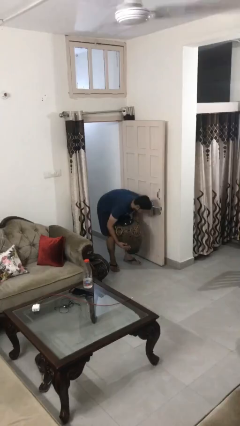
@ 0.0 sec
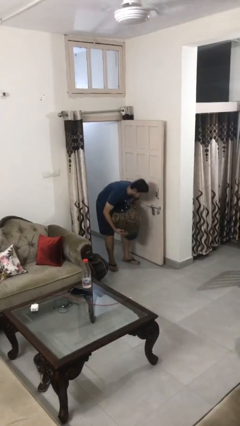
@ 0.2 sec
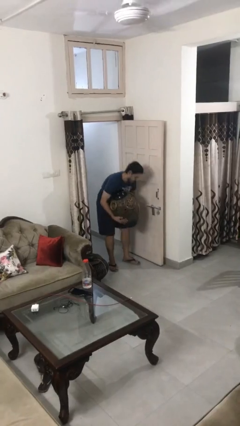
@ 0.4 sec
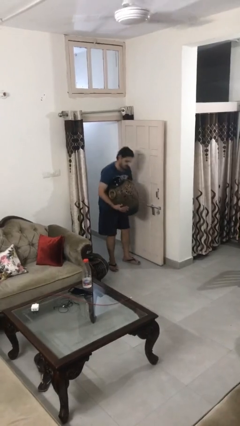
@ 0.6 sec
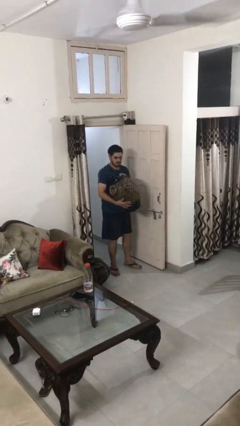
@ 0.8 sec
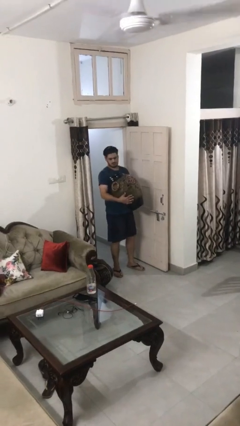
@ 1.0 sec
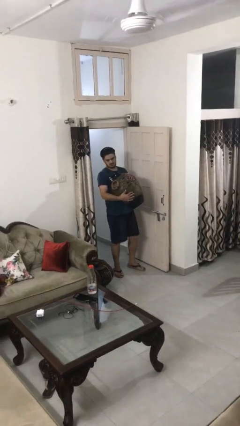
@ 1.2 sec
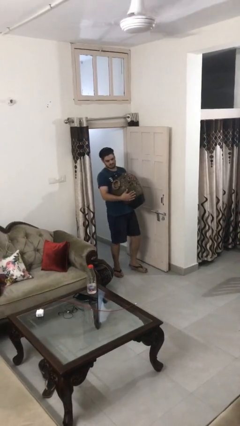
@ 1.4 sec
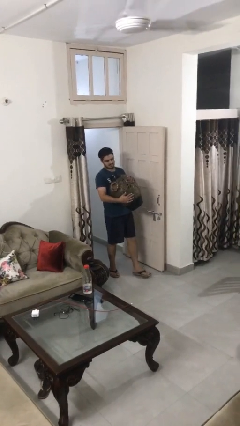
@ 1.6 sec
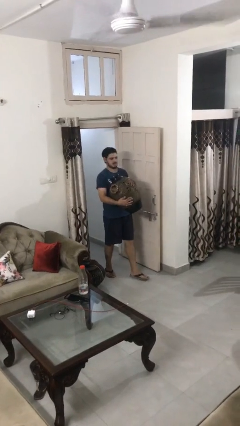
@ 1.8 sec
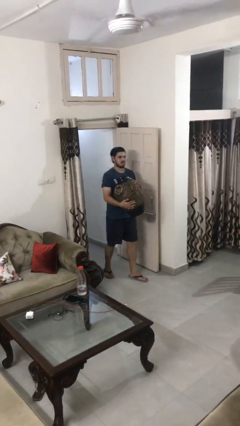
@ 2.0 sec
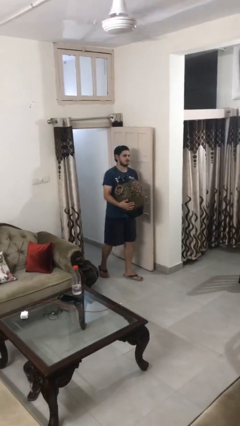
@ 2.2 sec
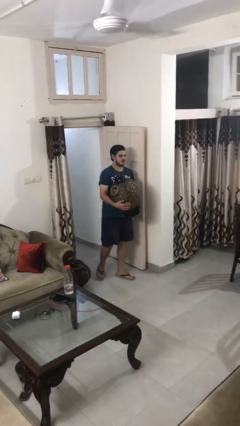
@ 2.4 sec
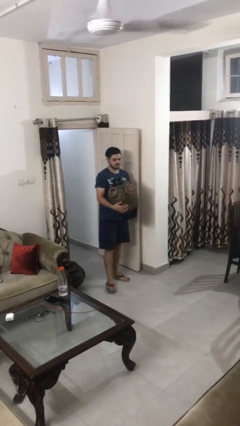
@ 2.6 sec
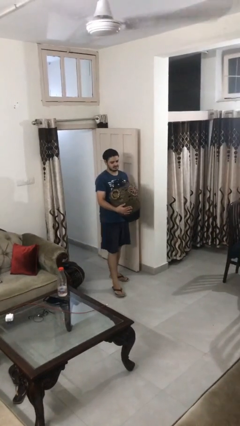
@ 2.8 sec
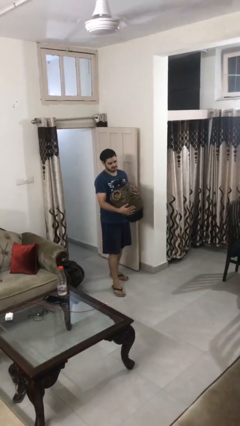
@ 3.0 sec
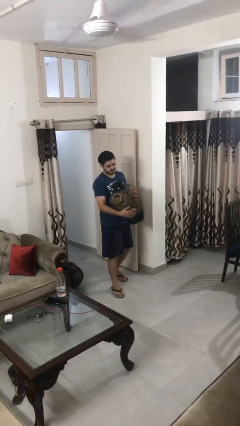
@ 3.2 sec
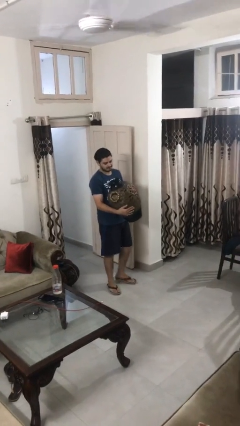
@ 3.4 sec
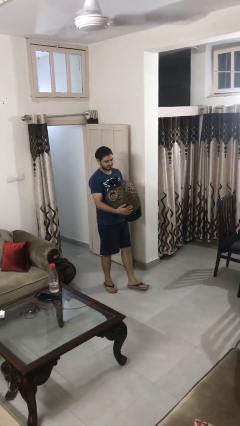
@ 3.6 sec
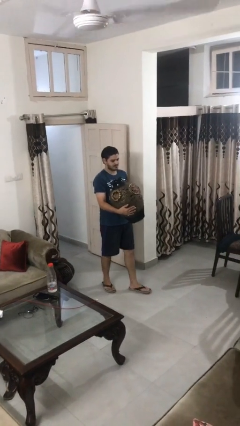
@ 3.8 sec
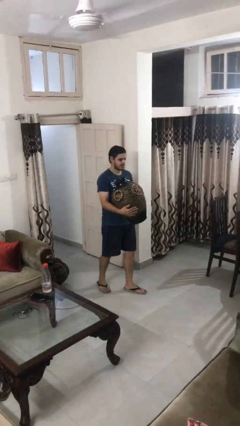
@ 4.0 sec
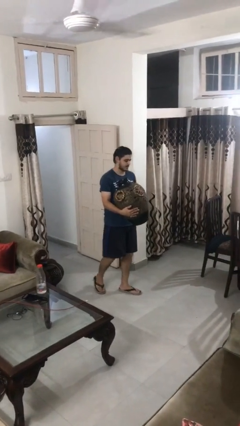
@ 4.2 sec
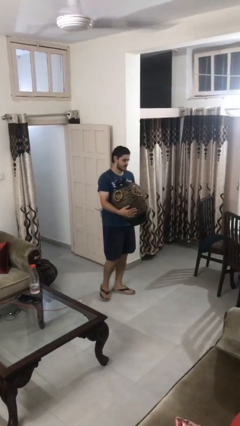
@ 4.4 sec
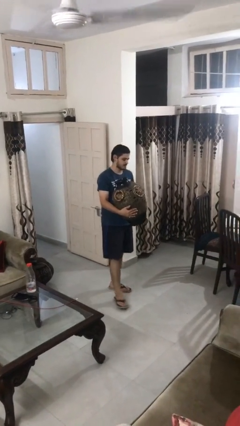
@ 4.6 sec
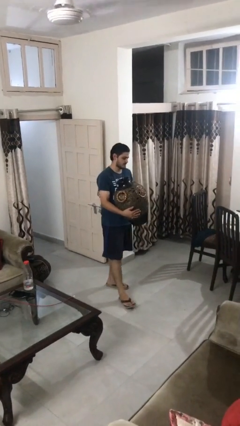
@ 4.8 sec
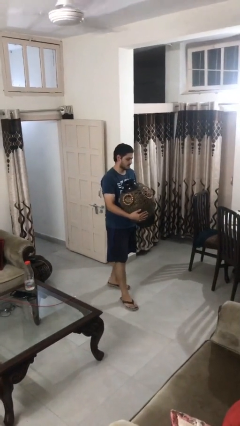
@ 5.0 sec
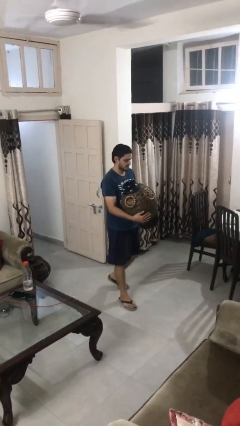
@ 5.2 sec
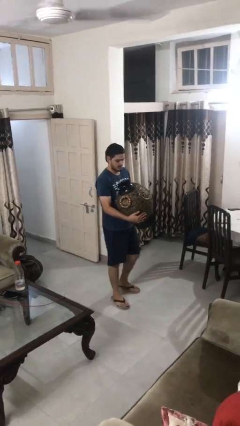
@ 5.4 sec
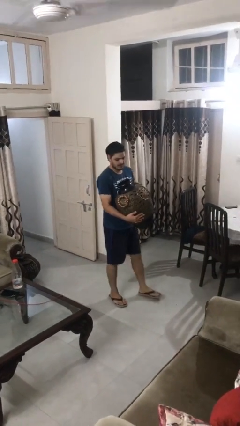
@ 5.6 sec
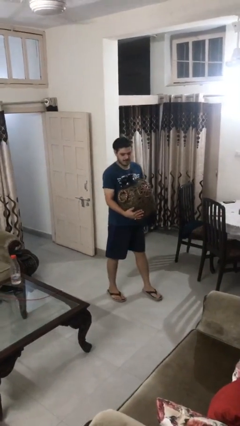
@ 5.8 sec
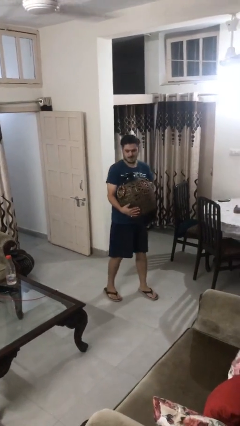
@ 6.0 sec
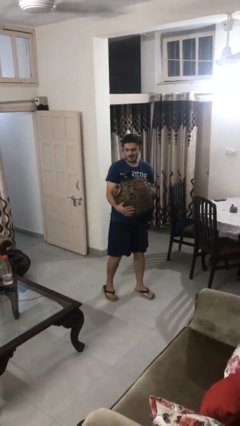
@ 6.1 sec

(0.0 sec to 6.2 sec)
person carries heavy object

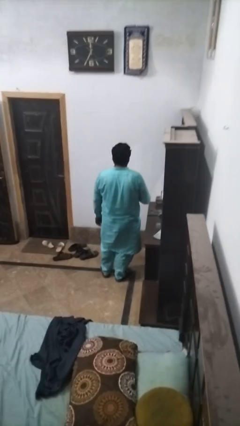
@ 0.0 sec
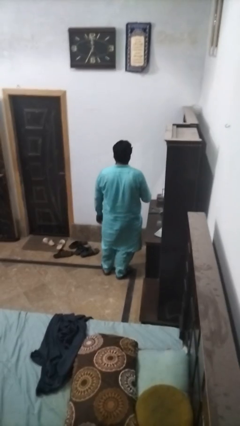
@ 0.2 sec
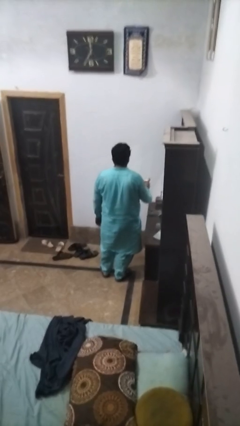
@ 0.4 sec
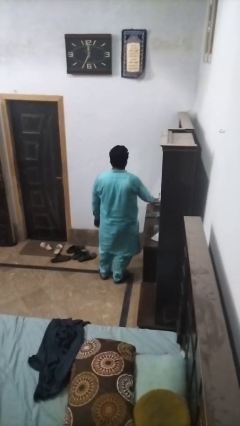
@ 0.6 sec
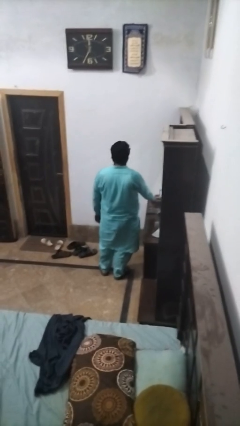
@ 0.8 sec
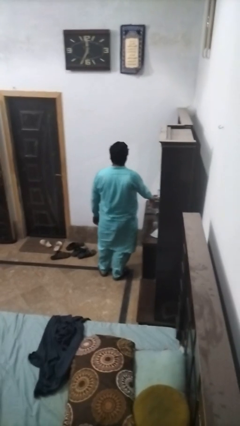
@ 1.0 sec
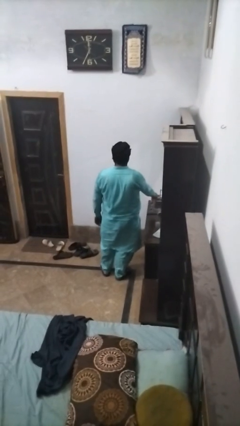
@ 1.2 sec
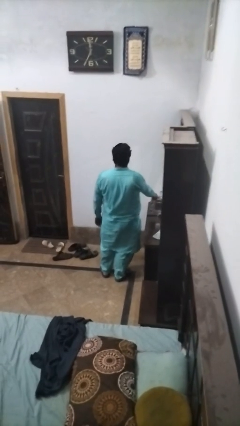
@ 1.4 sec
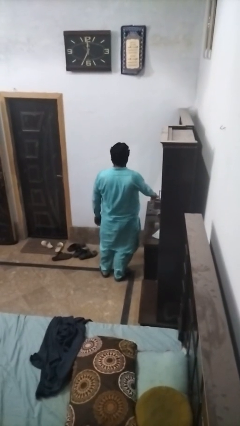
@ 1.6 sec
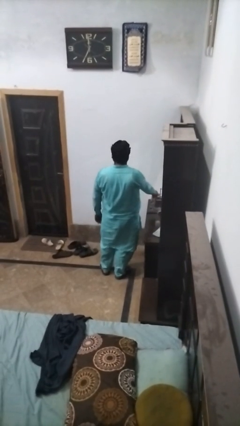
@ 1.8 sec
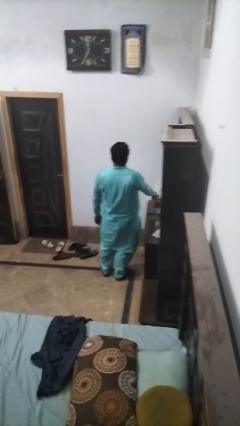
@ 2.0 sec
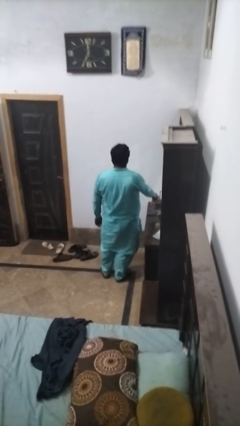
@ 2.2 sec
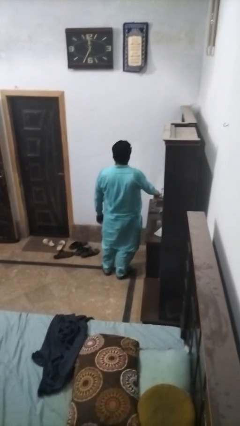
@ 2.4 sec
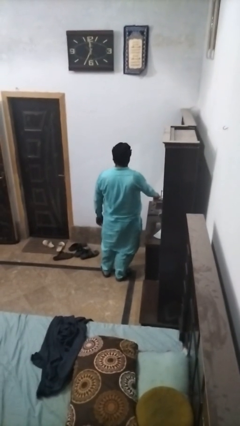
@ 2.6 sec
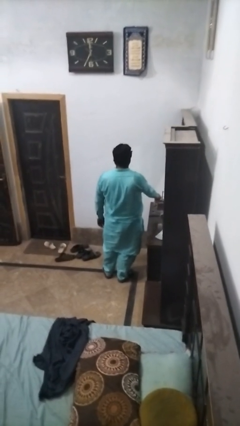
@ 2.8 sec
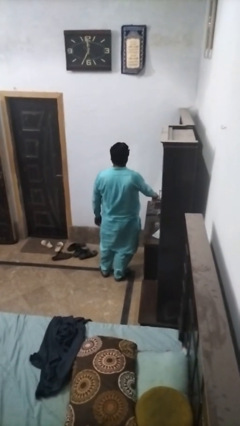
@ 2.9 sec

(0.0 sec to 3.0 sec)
person sprays from bottle

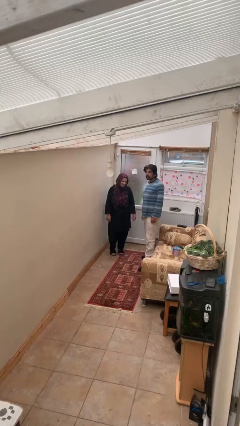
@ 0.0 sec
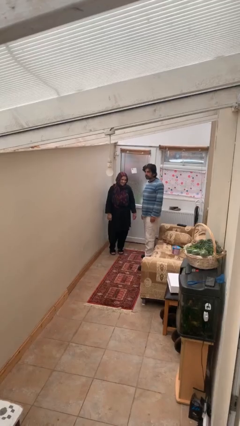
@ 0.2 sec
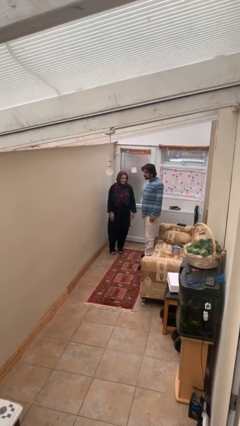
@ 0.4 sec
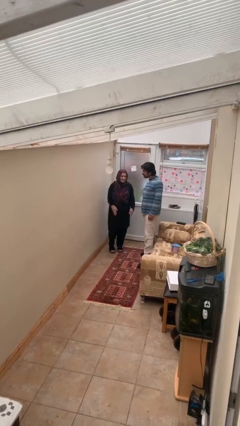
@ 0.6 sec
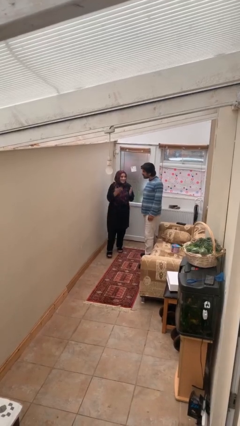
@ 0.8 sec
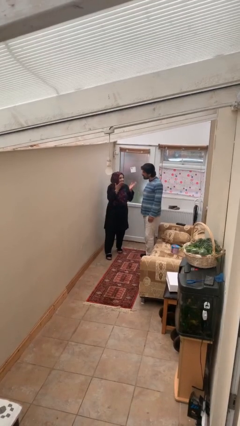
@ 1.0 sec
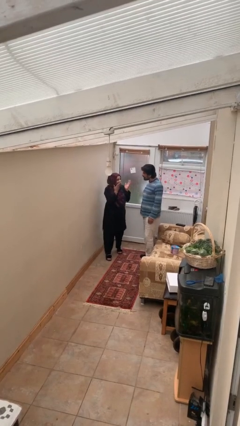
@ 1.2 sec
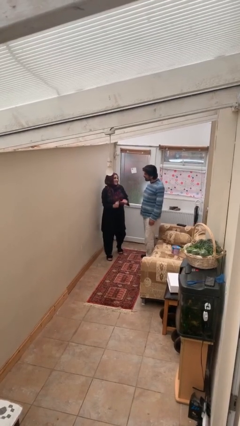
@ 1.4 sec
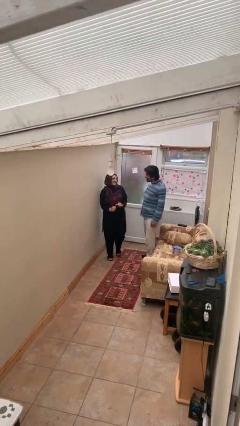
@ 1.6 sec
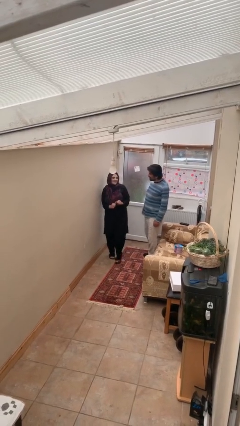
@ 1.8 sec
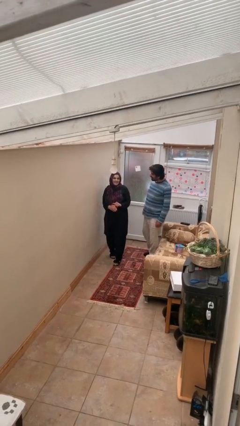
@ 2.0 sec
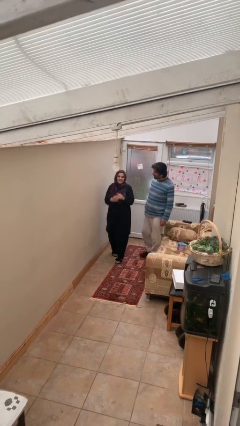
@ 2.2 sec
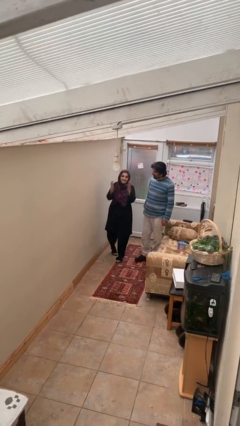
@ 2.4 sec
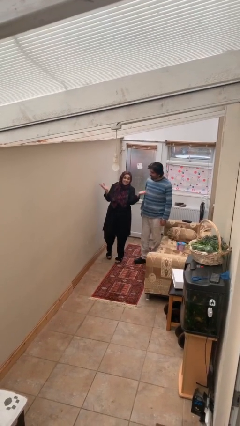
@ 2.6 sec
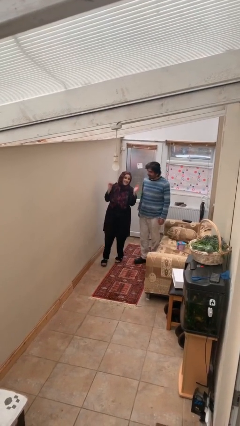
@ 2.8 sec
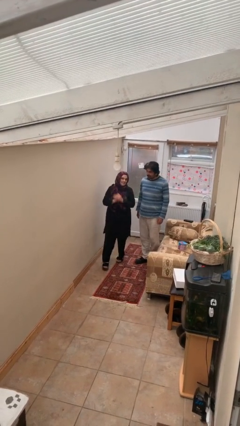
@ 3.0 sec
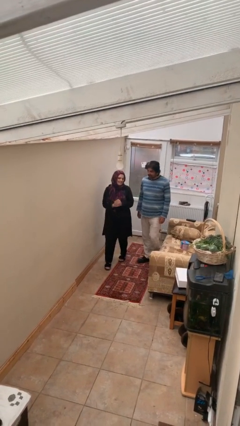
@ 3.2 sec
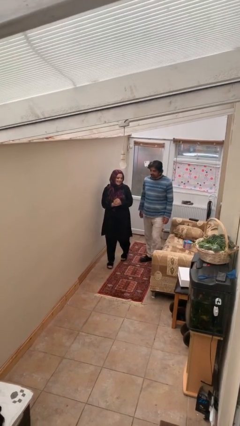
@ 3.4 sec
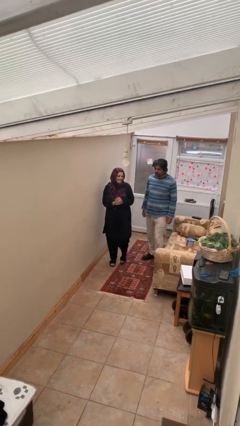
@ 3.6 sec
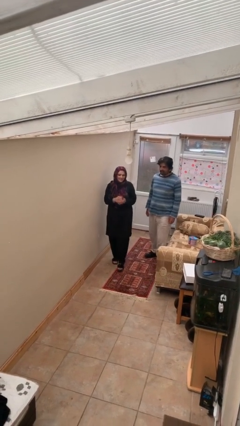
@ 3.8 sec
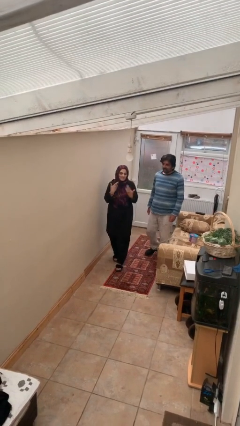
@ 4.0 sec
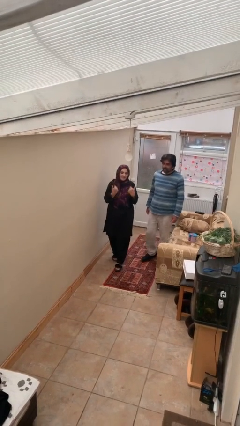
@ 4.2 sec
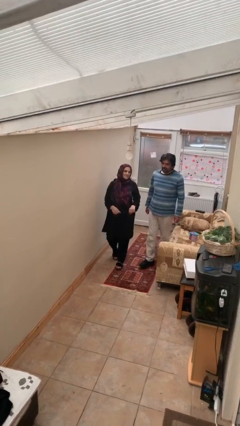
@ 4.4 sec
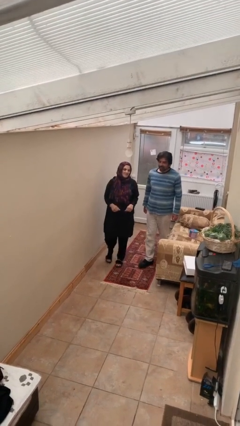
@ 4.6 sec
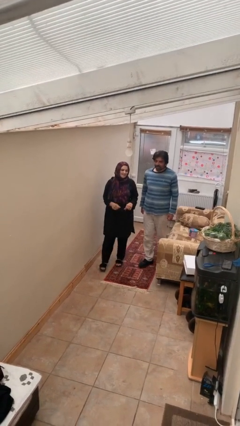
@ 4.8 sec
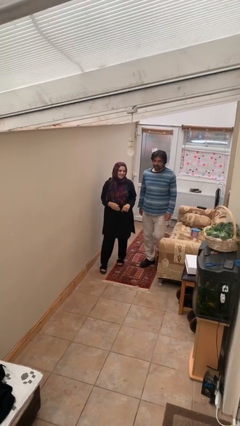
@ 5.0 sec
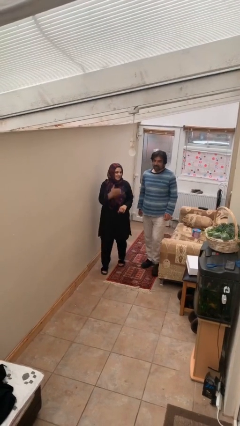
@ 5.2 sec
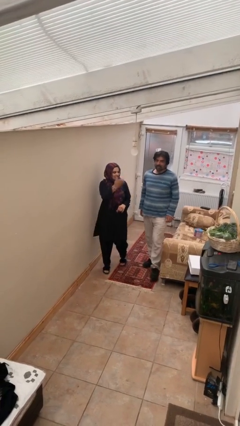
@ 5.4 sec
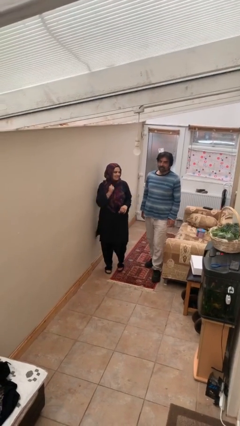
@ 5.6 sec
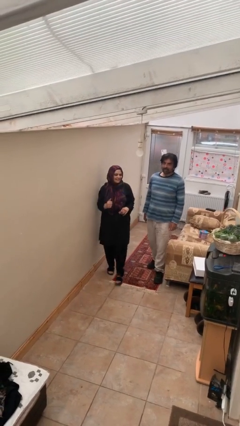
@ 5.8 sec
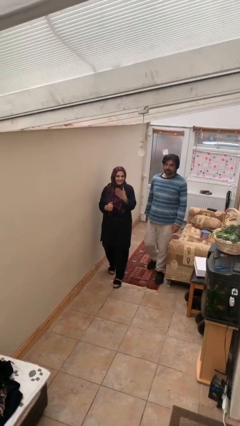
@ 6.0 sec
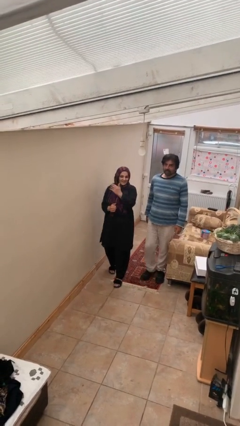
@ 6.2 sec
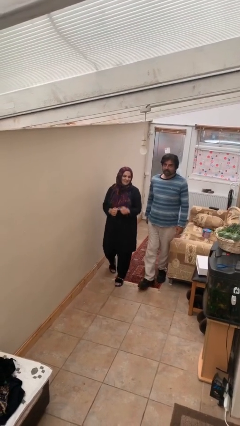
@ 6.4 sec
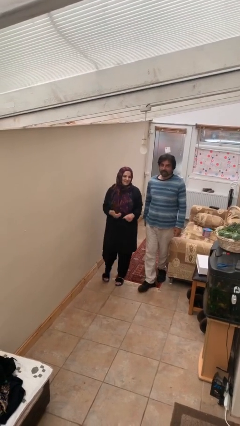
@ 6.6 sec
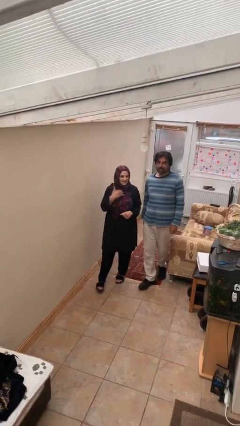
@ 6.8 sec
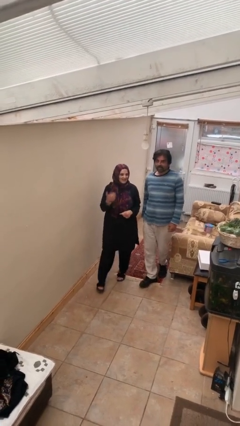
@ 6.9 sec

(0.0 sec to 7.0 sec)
person talks to person

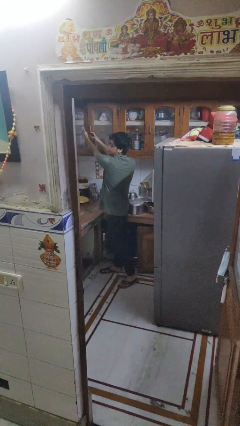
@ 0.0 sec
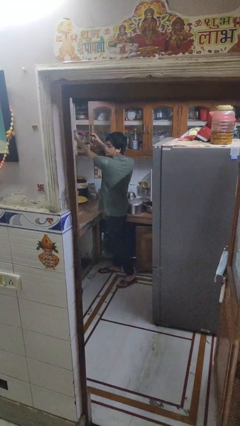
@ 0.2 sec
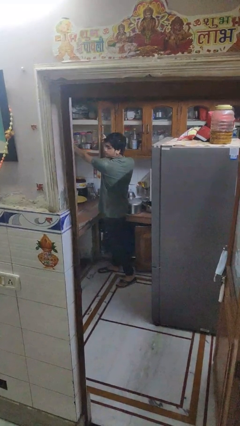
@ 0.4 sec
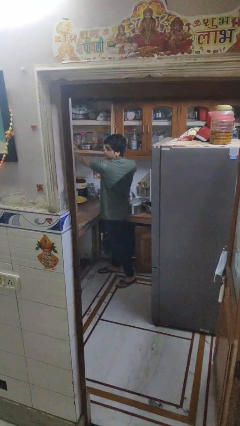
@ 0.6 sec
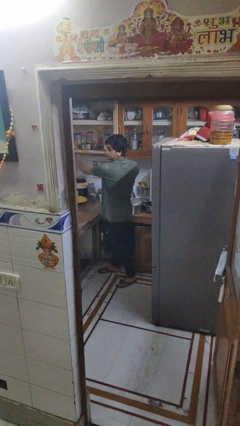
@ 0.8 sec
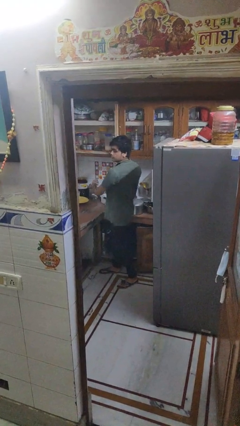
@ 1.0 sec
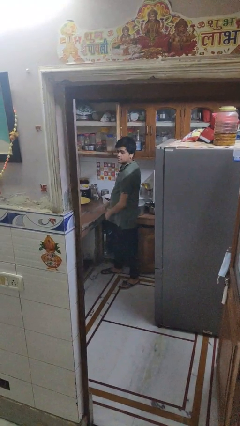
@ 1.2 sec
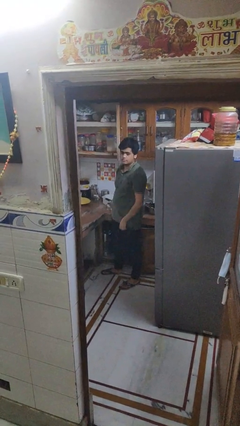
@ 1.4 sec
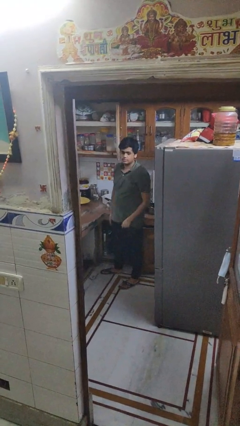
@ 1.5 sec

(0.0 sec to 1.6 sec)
person opens cabinet
